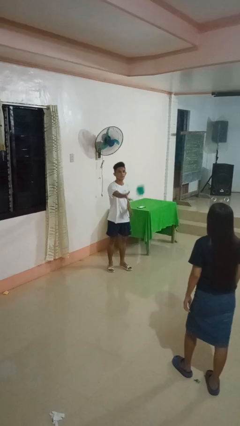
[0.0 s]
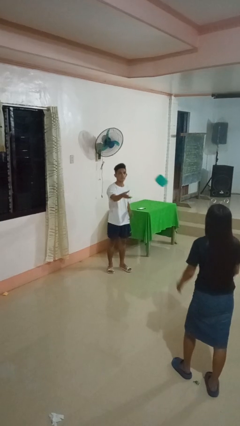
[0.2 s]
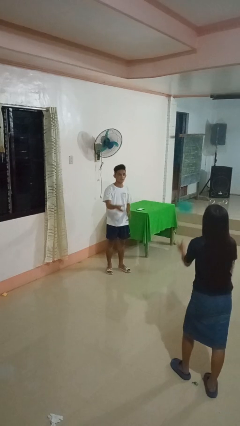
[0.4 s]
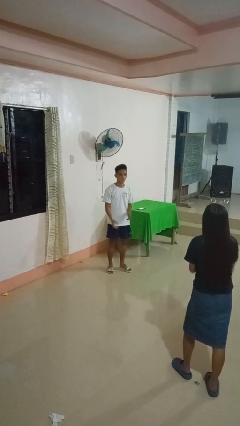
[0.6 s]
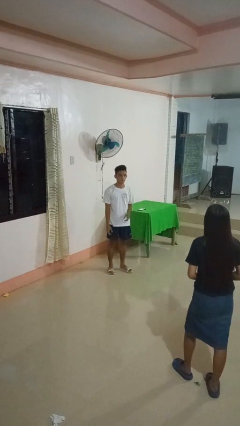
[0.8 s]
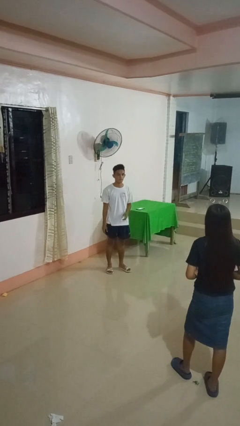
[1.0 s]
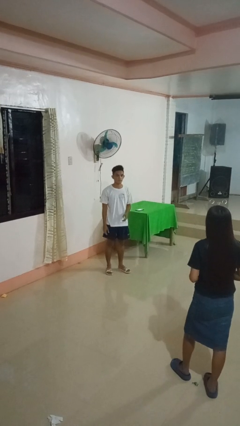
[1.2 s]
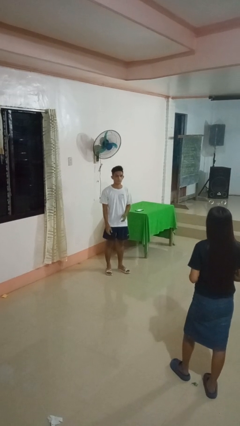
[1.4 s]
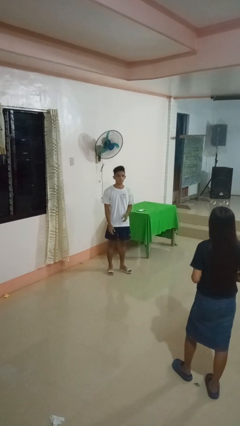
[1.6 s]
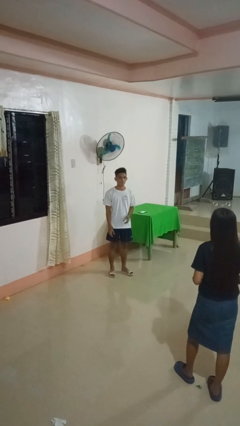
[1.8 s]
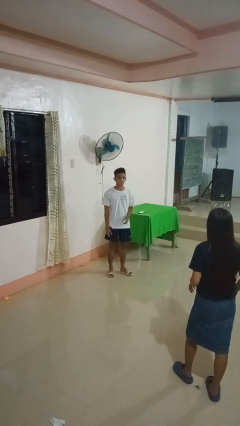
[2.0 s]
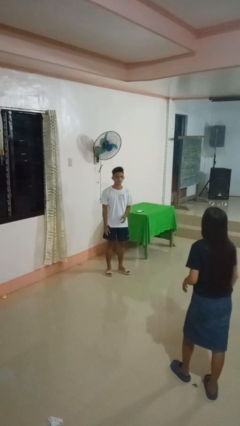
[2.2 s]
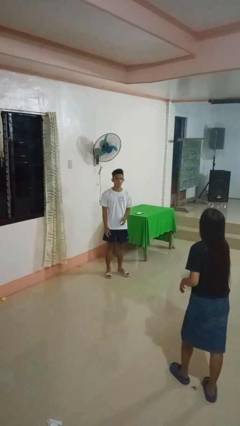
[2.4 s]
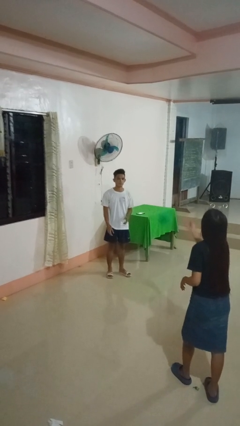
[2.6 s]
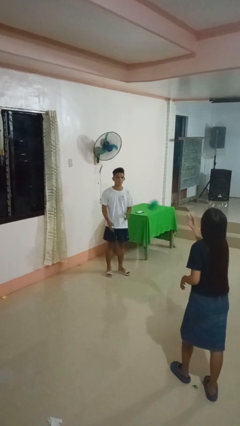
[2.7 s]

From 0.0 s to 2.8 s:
person throws object to person

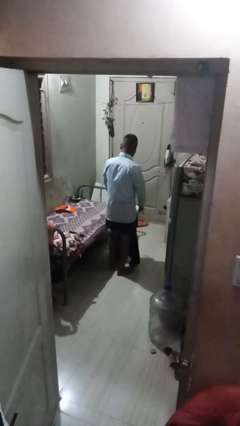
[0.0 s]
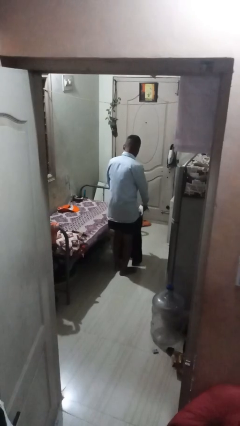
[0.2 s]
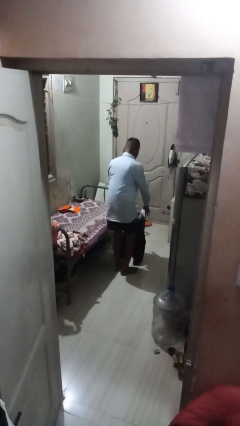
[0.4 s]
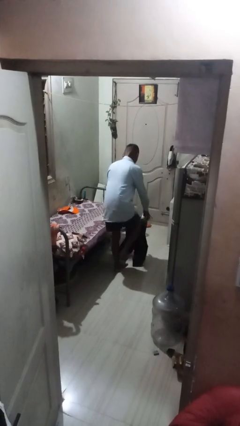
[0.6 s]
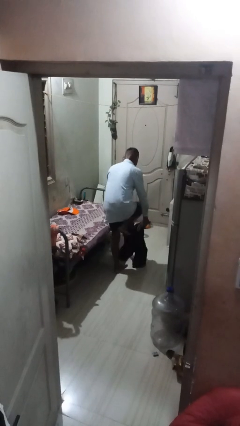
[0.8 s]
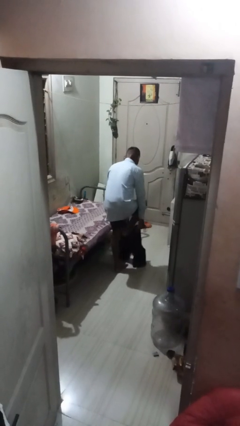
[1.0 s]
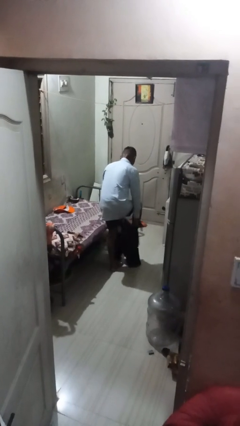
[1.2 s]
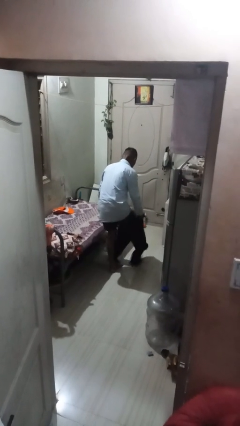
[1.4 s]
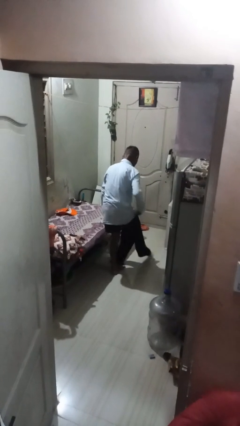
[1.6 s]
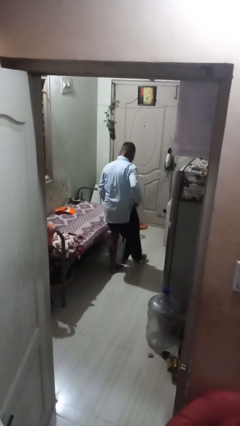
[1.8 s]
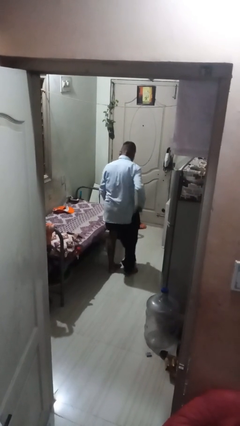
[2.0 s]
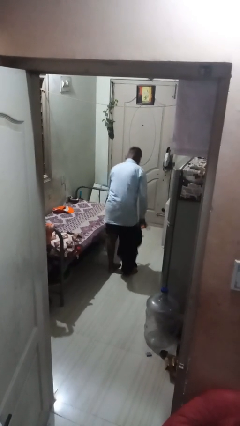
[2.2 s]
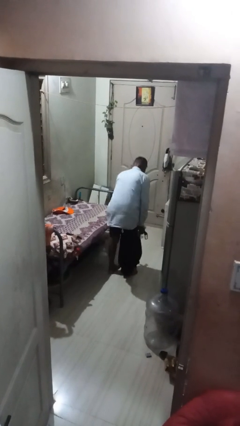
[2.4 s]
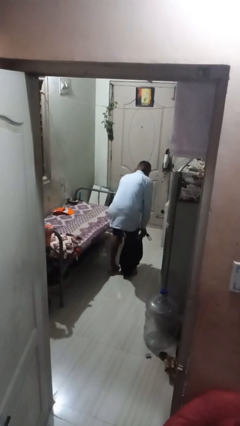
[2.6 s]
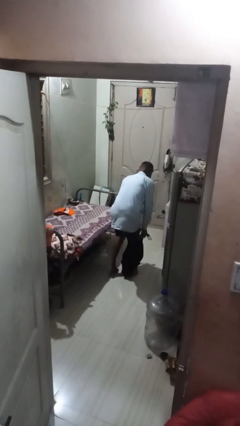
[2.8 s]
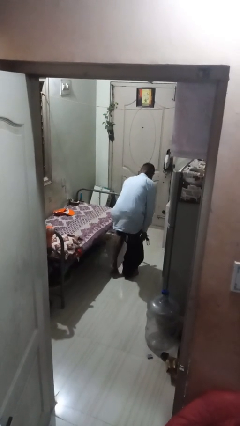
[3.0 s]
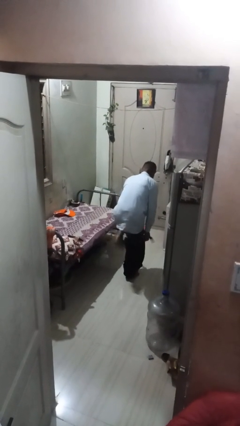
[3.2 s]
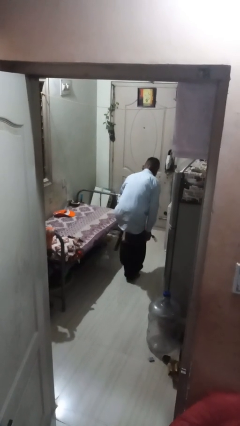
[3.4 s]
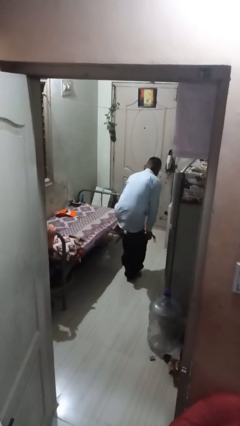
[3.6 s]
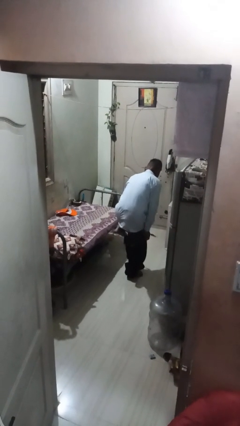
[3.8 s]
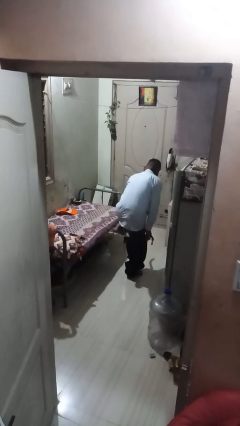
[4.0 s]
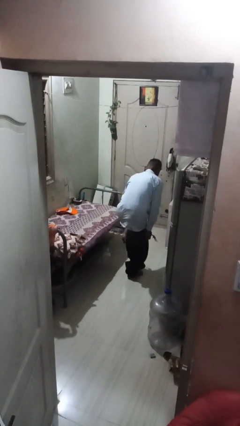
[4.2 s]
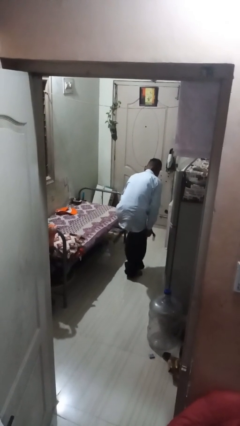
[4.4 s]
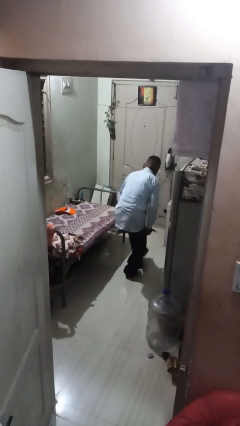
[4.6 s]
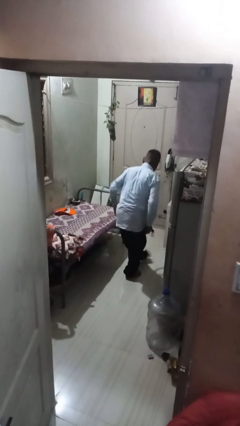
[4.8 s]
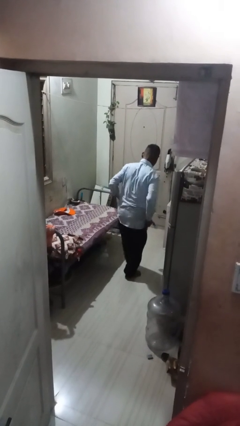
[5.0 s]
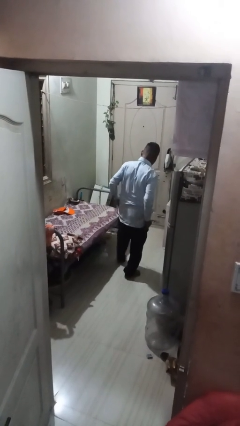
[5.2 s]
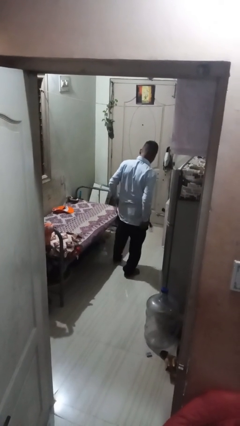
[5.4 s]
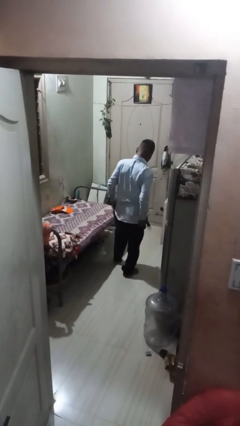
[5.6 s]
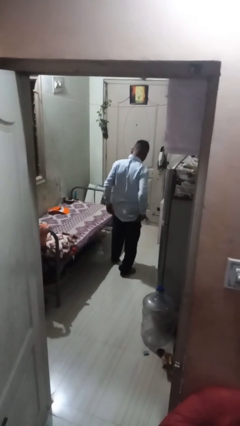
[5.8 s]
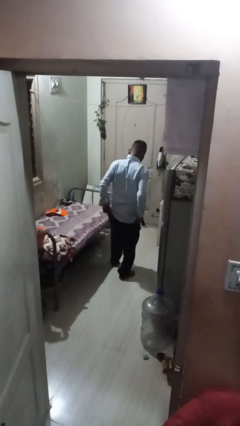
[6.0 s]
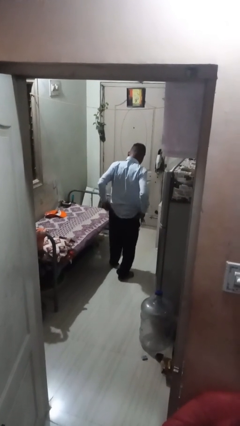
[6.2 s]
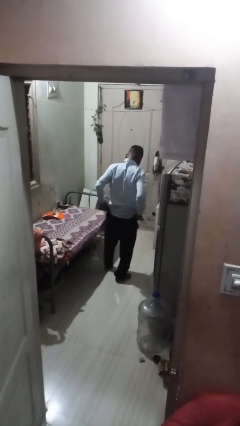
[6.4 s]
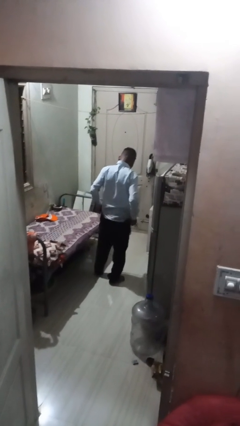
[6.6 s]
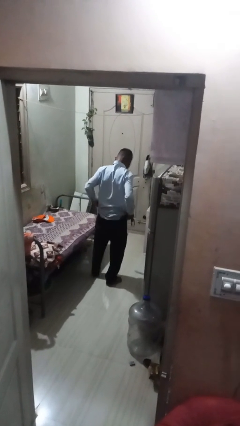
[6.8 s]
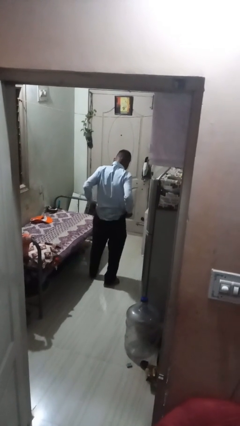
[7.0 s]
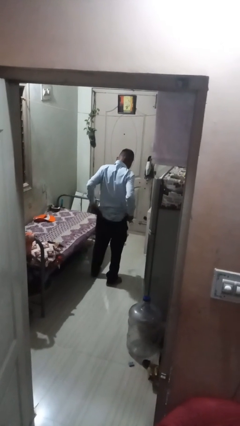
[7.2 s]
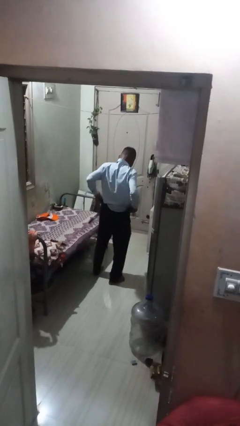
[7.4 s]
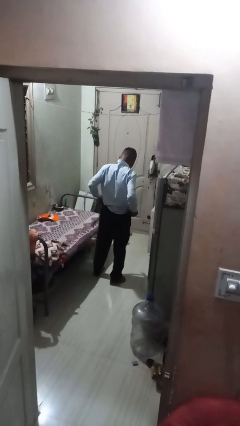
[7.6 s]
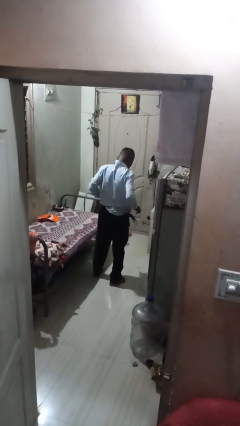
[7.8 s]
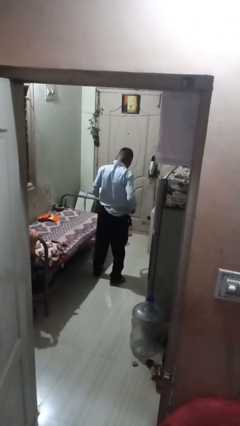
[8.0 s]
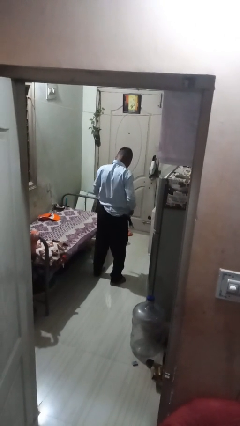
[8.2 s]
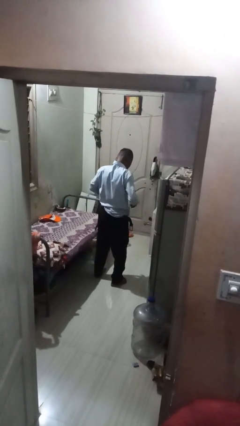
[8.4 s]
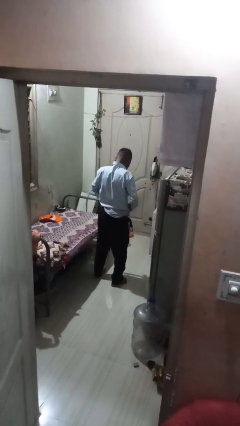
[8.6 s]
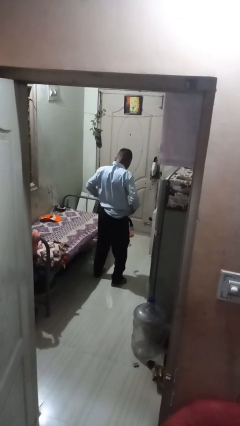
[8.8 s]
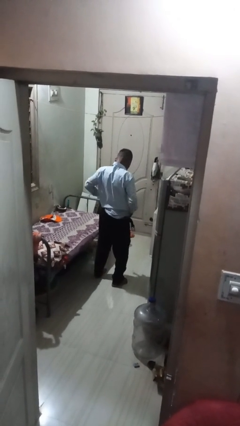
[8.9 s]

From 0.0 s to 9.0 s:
person puts on pants

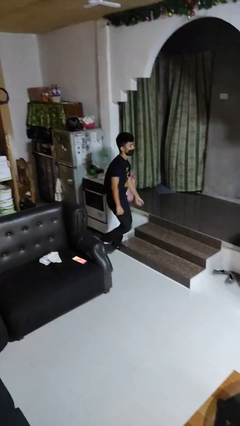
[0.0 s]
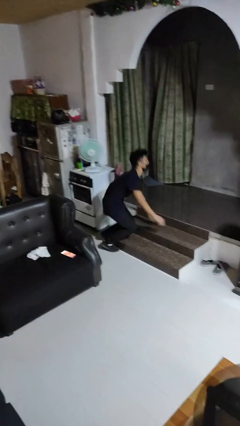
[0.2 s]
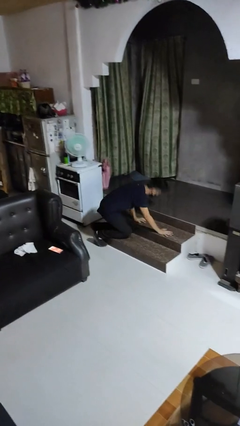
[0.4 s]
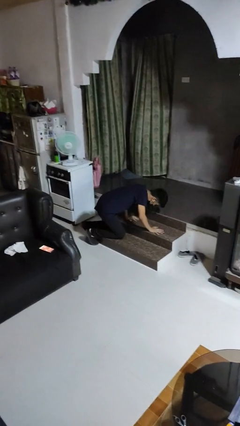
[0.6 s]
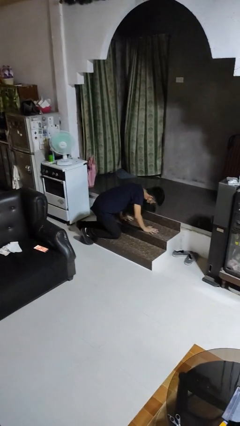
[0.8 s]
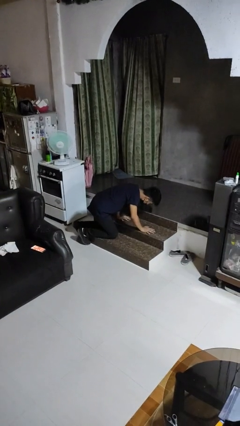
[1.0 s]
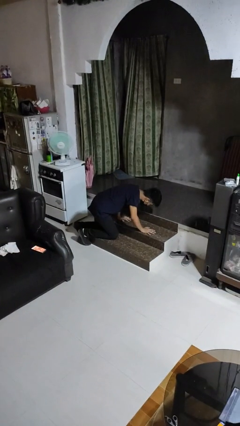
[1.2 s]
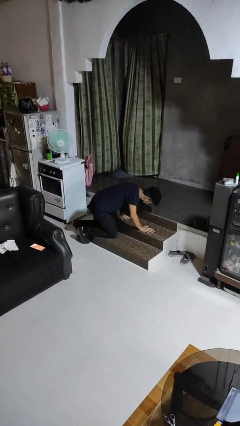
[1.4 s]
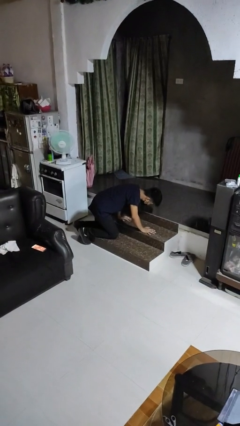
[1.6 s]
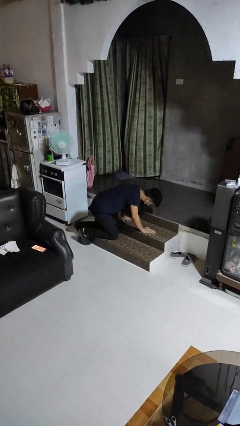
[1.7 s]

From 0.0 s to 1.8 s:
person trips on object on floor

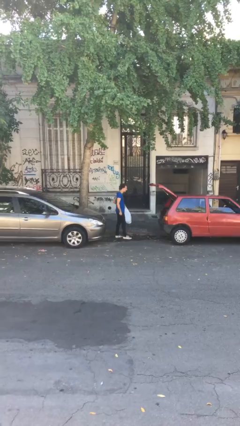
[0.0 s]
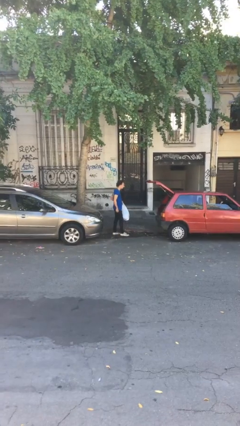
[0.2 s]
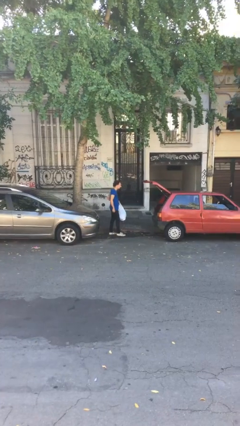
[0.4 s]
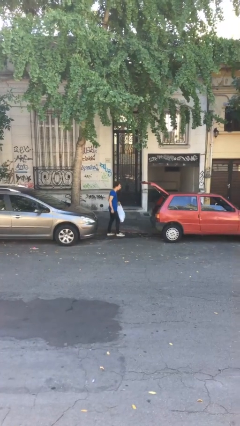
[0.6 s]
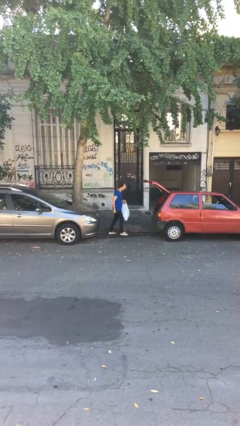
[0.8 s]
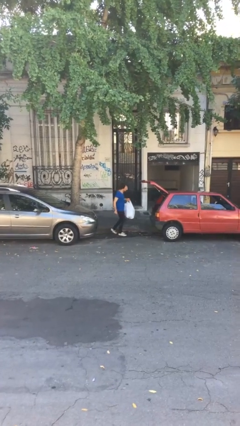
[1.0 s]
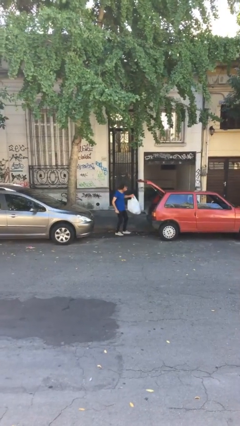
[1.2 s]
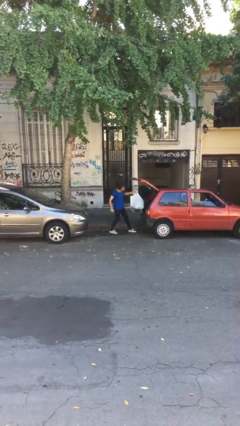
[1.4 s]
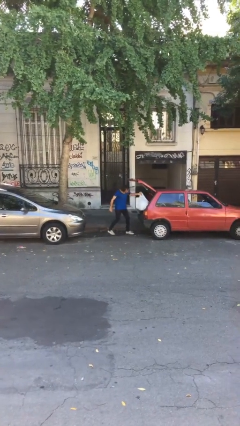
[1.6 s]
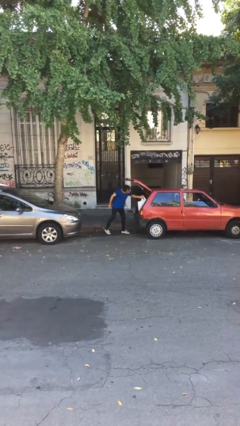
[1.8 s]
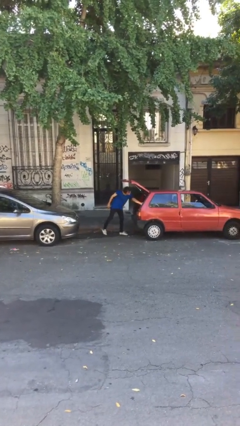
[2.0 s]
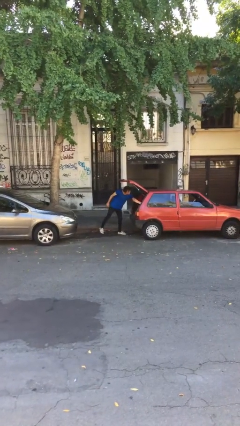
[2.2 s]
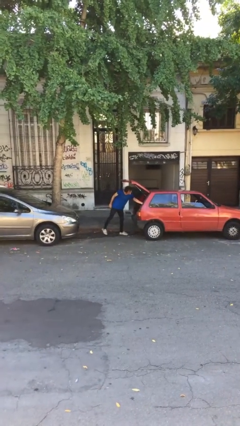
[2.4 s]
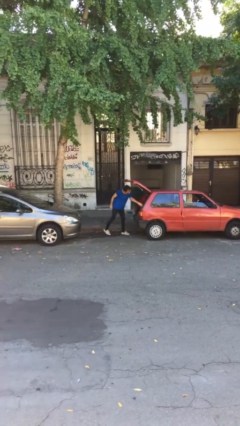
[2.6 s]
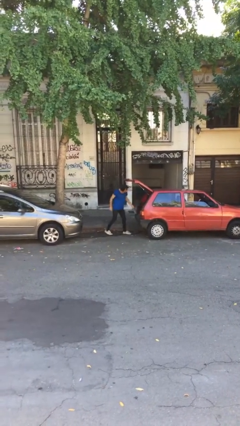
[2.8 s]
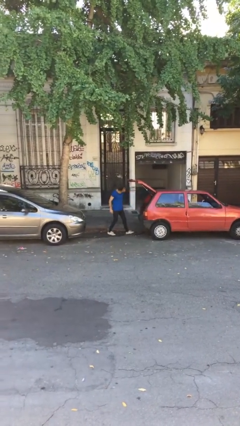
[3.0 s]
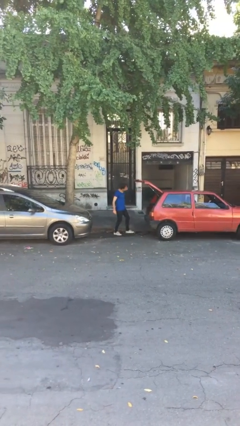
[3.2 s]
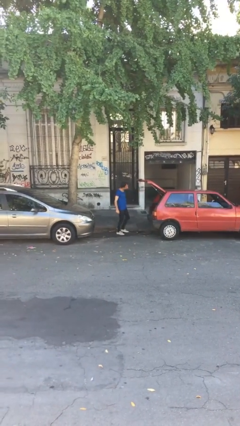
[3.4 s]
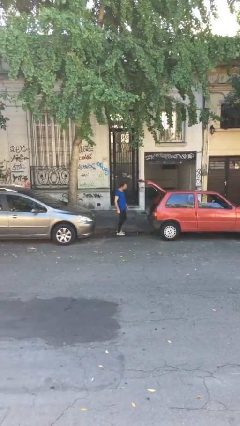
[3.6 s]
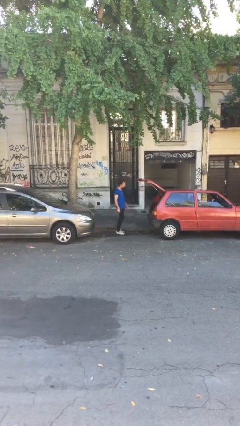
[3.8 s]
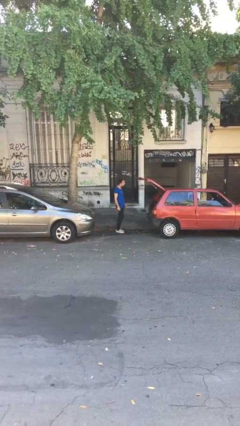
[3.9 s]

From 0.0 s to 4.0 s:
person loads car
